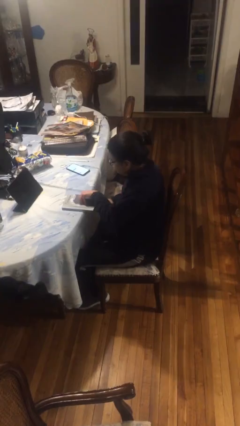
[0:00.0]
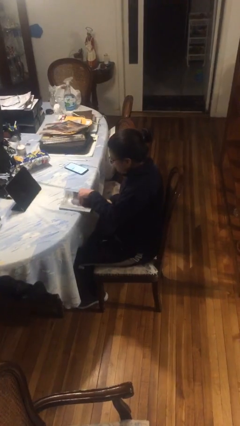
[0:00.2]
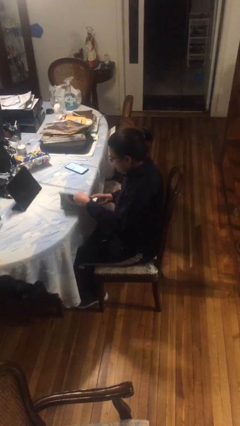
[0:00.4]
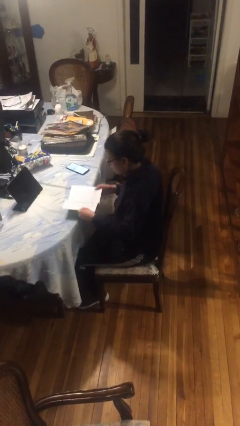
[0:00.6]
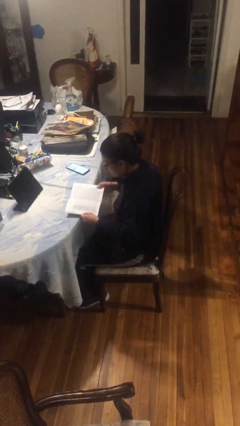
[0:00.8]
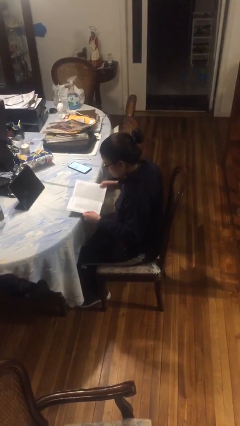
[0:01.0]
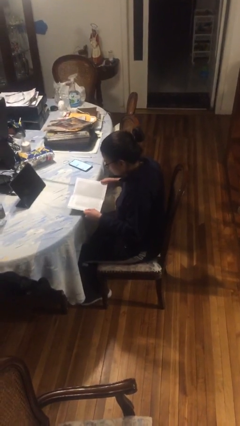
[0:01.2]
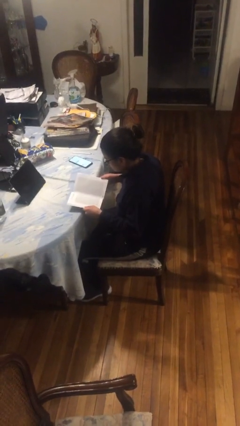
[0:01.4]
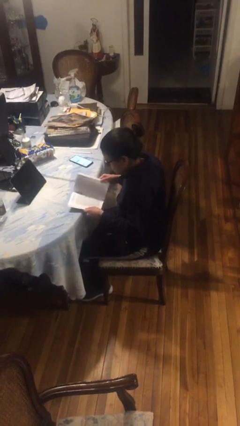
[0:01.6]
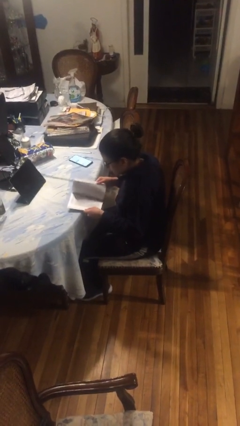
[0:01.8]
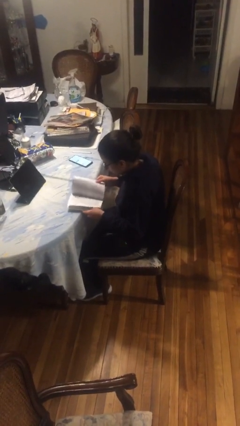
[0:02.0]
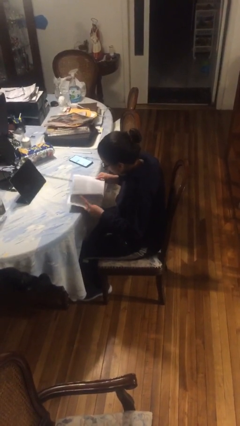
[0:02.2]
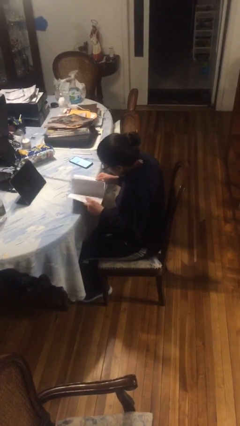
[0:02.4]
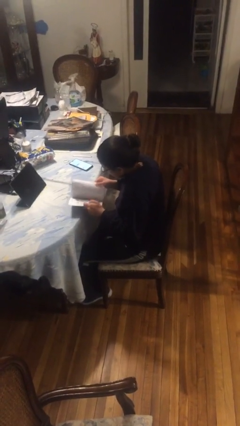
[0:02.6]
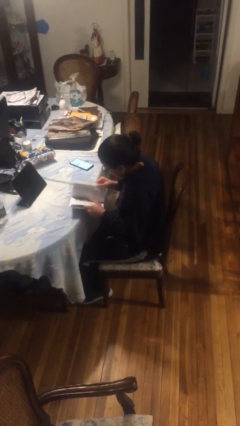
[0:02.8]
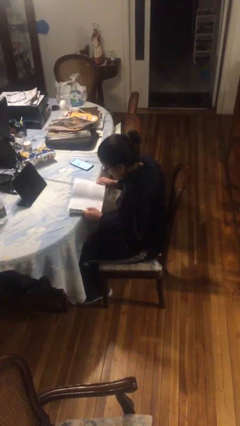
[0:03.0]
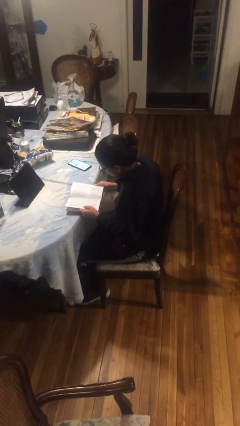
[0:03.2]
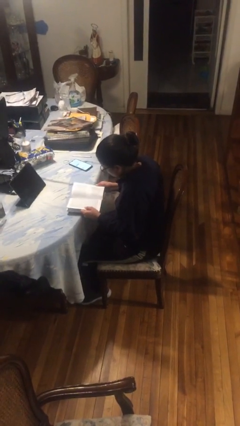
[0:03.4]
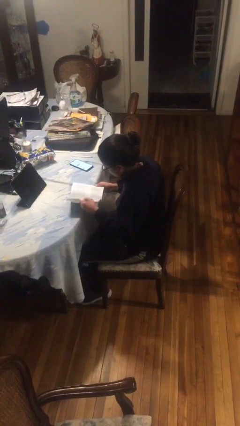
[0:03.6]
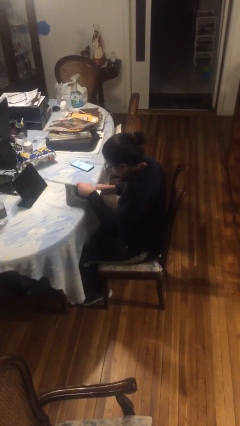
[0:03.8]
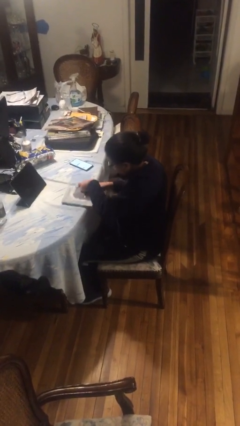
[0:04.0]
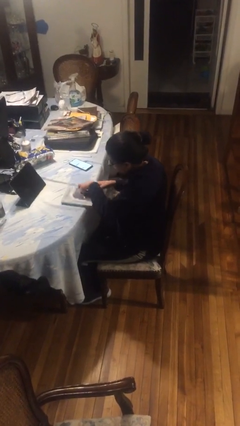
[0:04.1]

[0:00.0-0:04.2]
person reads book

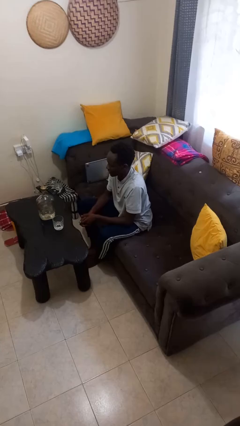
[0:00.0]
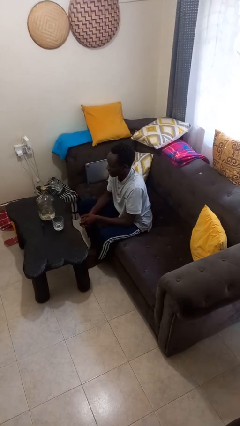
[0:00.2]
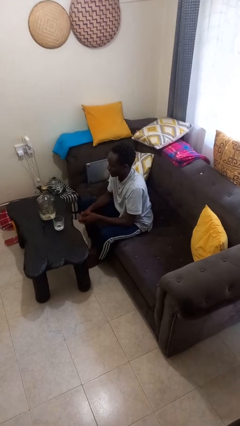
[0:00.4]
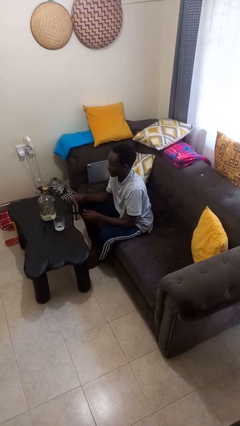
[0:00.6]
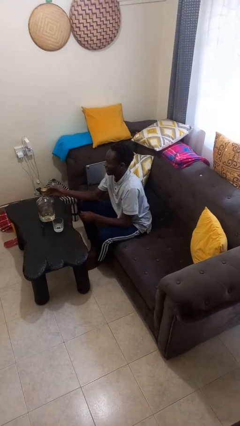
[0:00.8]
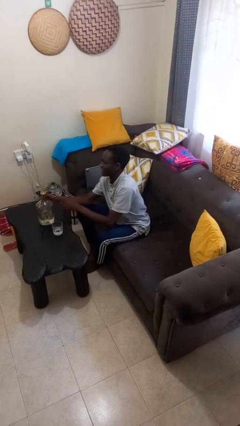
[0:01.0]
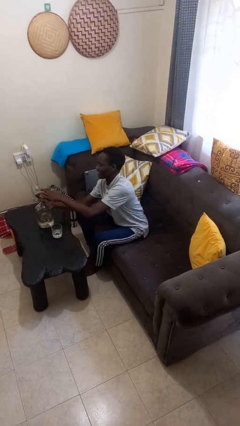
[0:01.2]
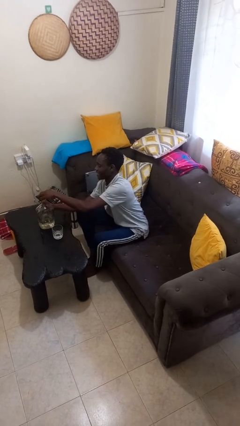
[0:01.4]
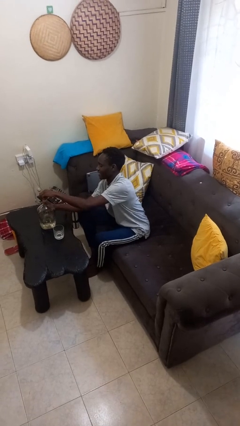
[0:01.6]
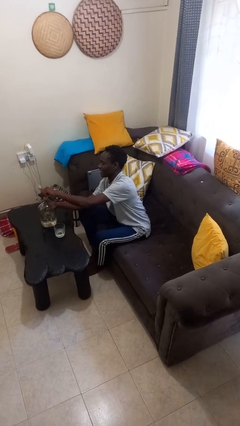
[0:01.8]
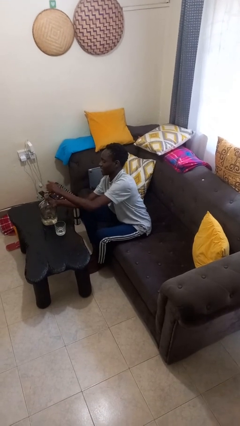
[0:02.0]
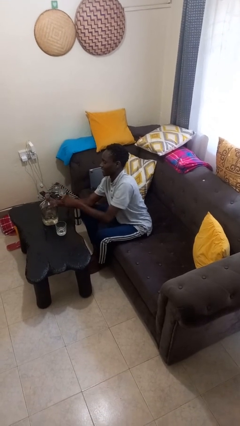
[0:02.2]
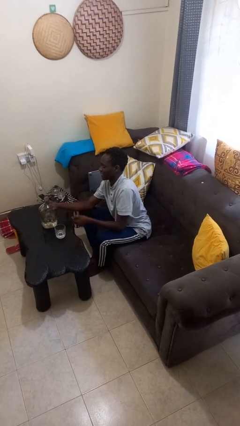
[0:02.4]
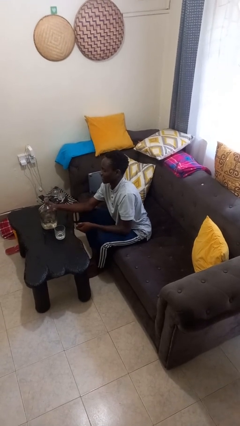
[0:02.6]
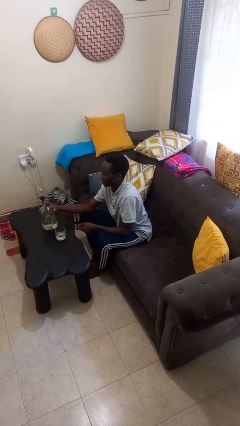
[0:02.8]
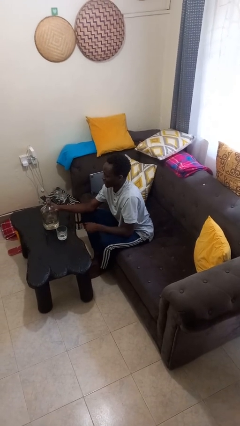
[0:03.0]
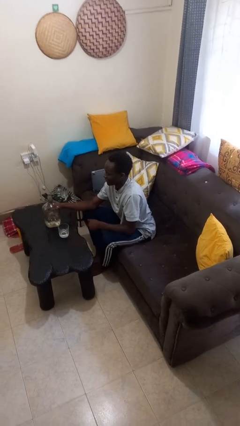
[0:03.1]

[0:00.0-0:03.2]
person unscrews lid from bottle

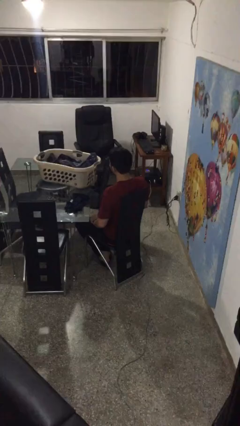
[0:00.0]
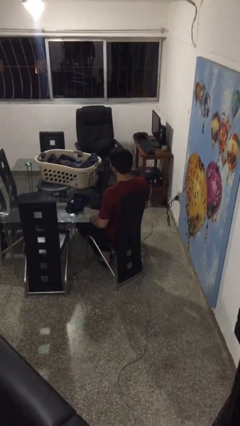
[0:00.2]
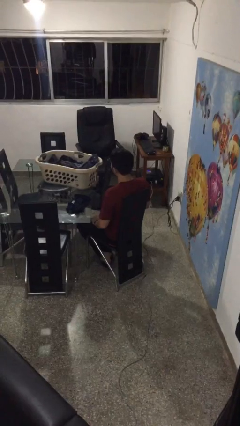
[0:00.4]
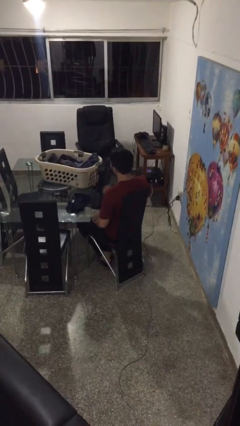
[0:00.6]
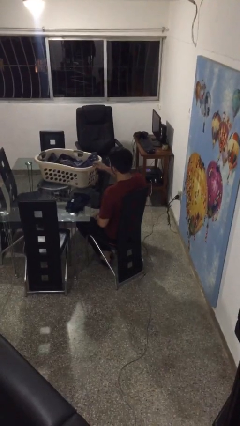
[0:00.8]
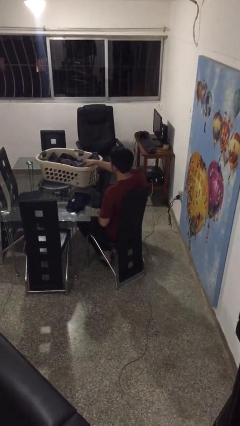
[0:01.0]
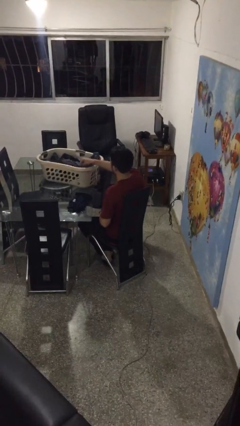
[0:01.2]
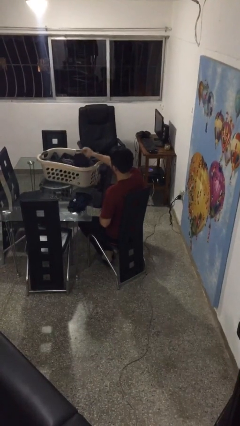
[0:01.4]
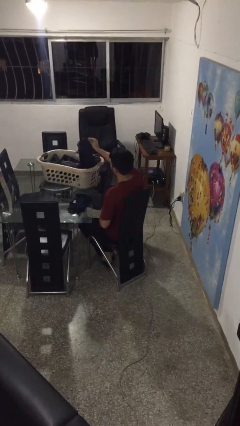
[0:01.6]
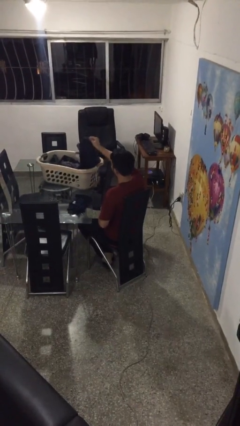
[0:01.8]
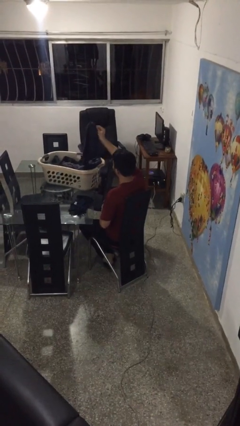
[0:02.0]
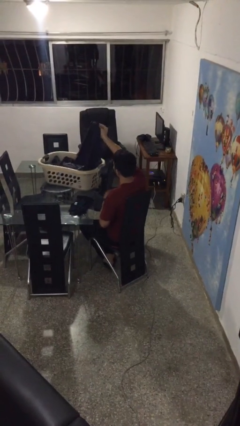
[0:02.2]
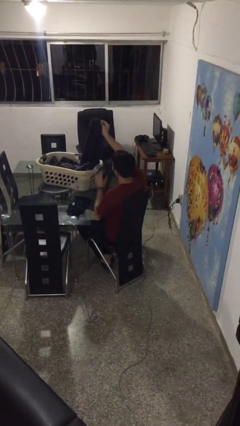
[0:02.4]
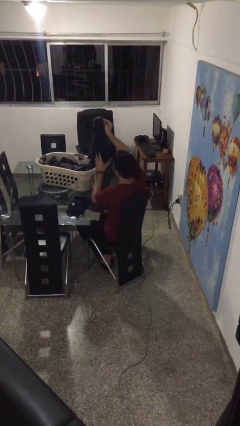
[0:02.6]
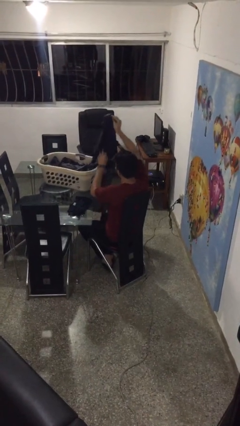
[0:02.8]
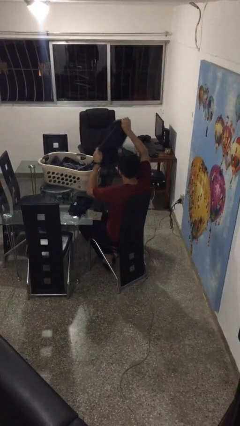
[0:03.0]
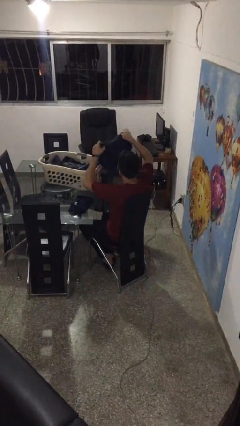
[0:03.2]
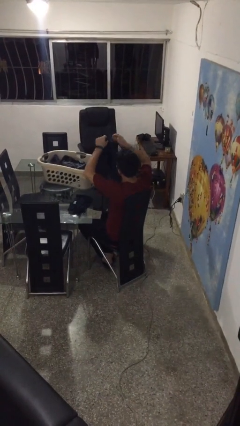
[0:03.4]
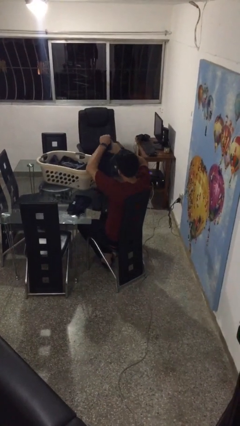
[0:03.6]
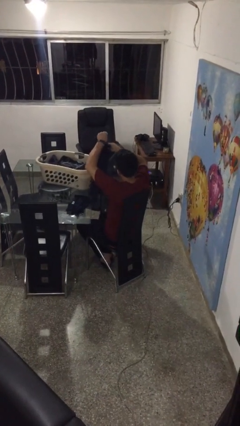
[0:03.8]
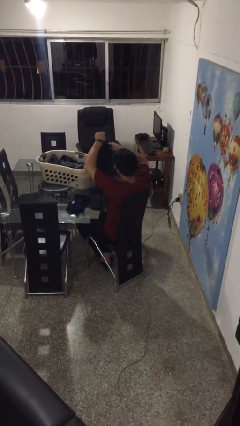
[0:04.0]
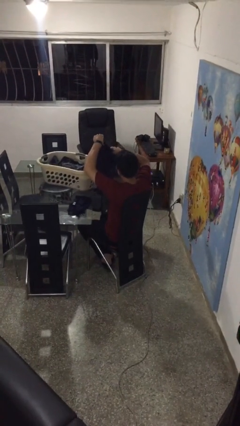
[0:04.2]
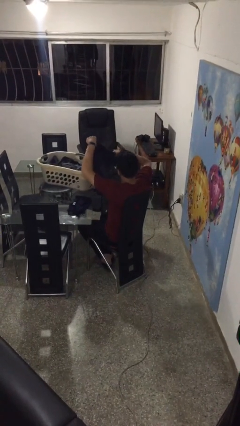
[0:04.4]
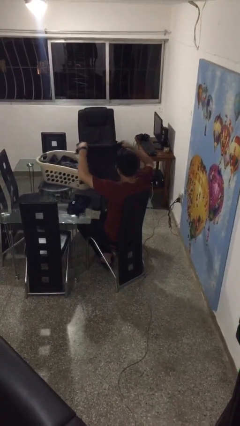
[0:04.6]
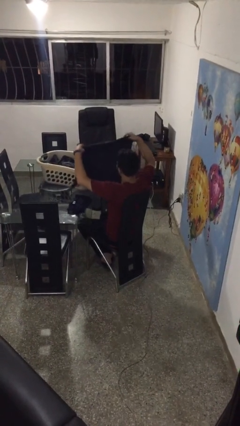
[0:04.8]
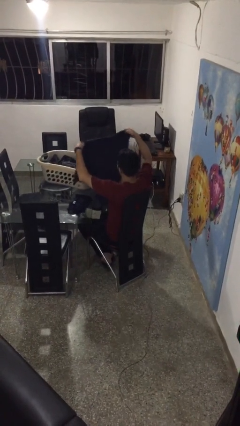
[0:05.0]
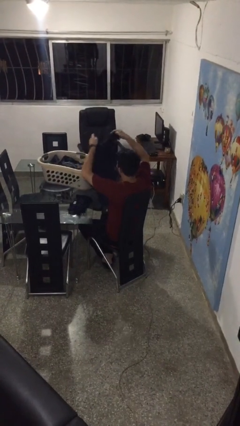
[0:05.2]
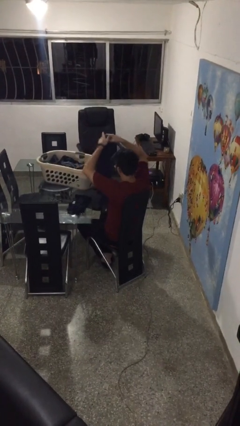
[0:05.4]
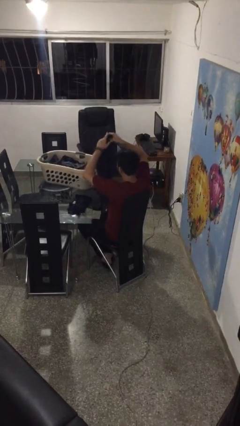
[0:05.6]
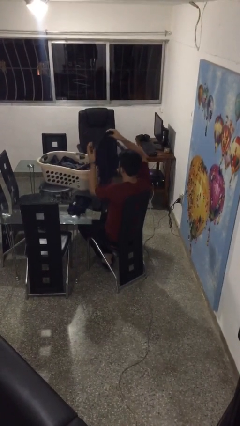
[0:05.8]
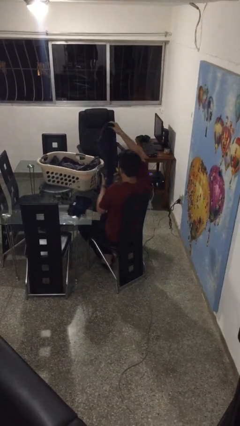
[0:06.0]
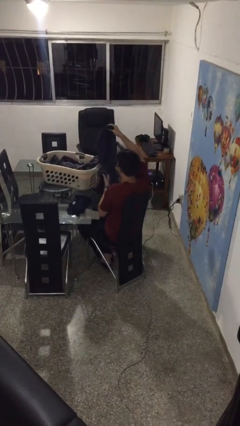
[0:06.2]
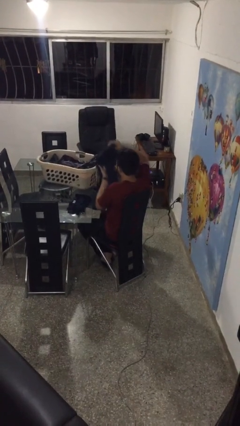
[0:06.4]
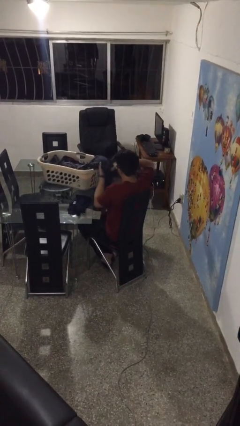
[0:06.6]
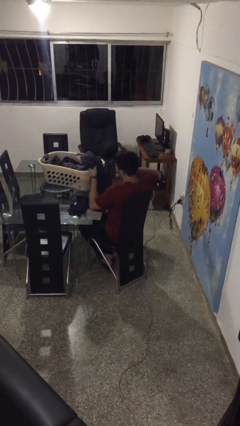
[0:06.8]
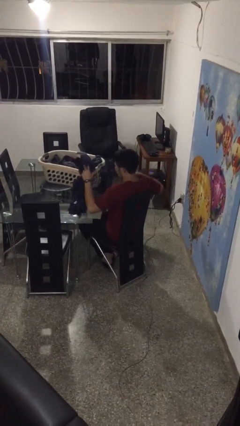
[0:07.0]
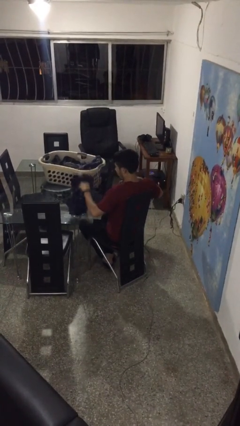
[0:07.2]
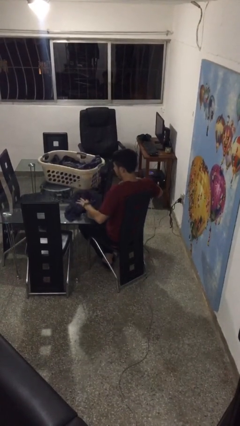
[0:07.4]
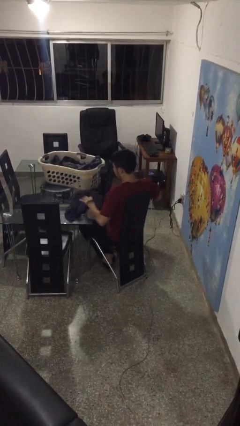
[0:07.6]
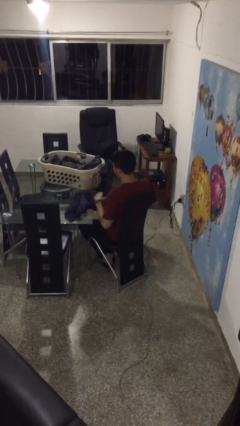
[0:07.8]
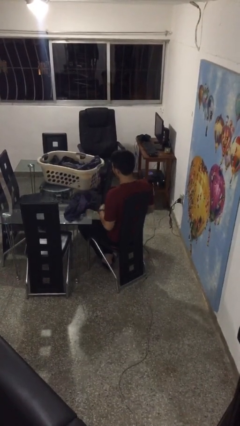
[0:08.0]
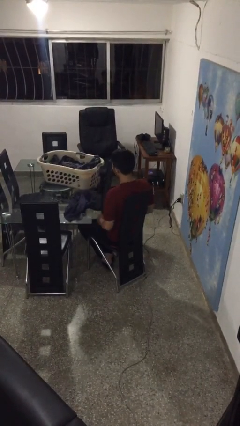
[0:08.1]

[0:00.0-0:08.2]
person folds shirt

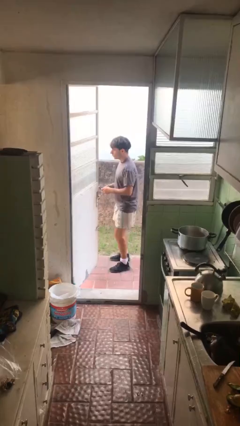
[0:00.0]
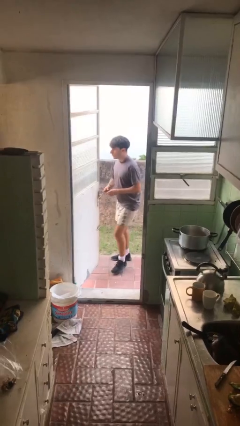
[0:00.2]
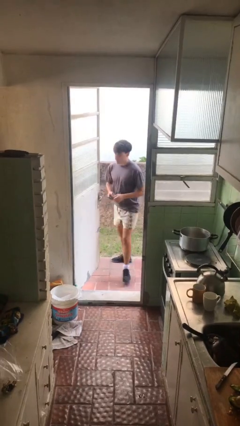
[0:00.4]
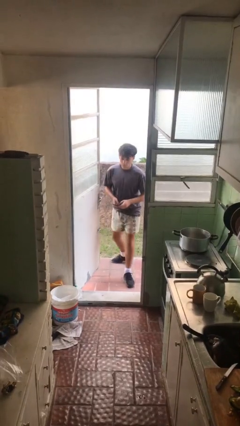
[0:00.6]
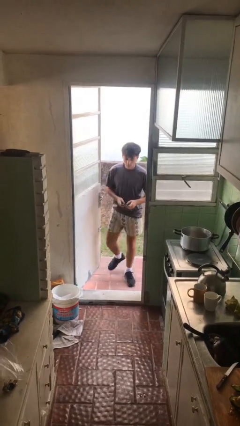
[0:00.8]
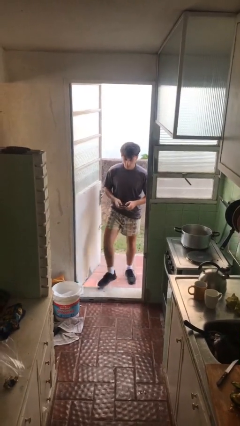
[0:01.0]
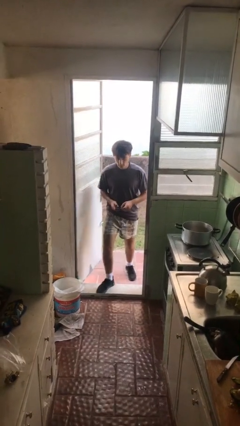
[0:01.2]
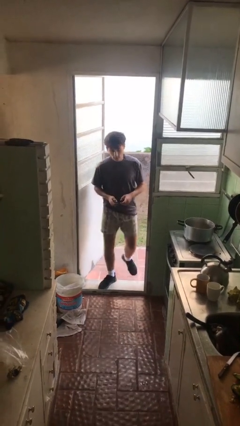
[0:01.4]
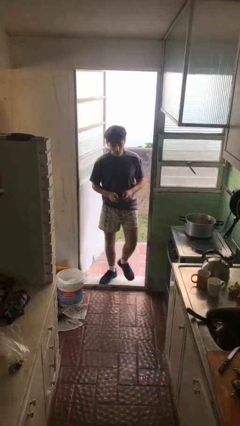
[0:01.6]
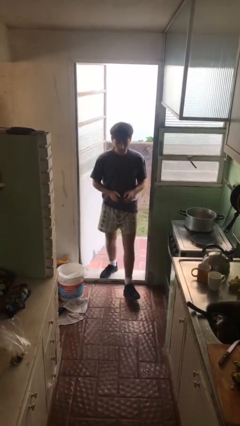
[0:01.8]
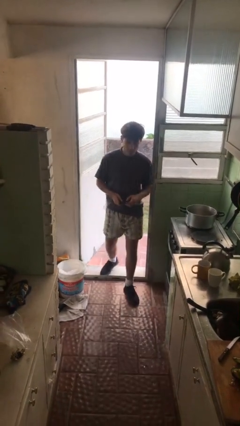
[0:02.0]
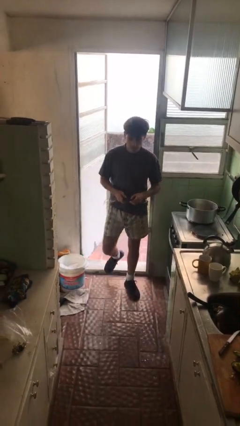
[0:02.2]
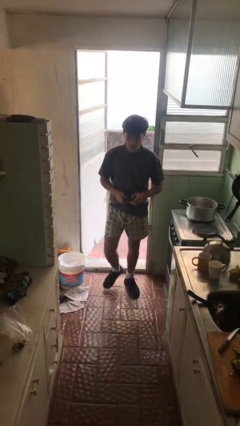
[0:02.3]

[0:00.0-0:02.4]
person enters scene through structure
